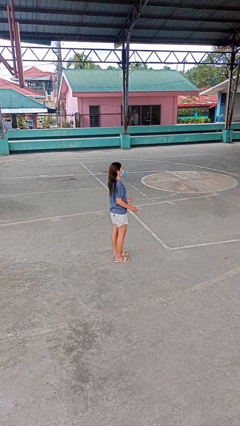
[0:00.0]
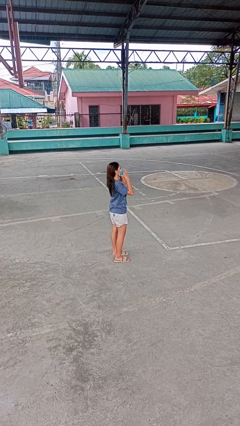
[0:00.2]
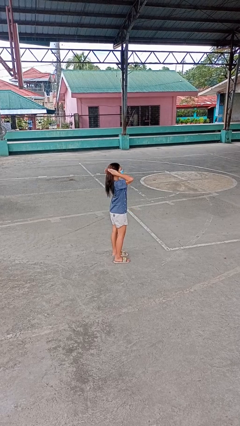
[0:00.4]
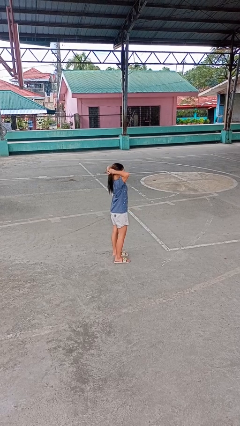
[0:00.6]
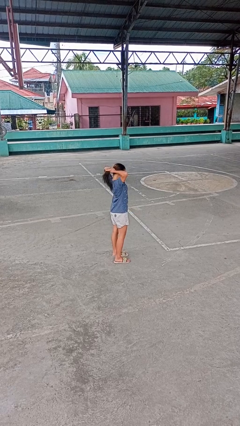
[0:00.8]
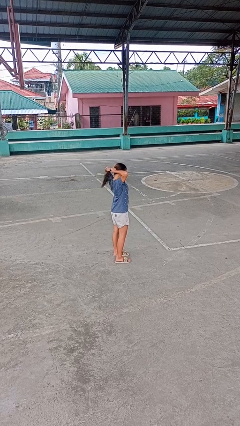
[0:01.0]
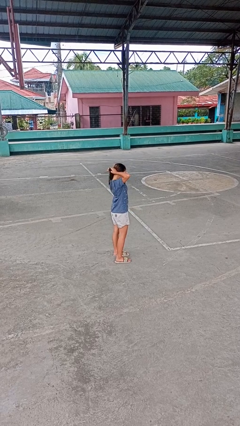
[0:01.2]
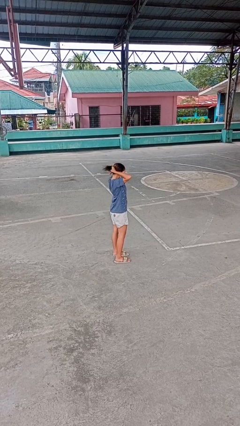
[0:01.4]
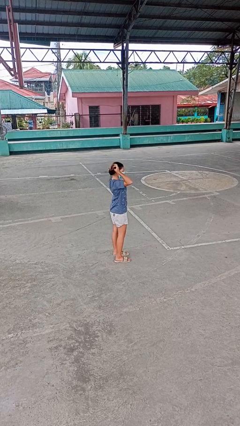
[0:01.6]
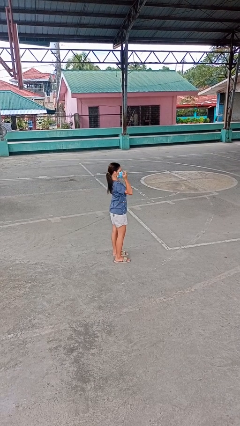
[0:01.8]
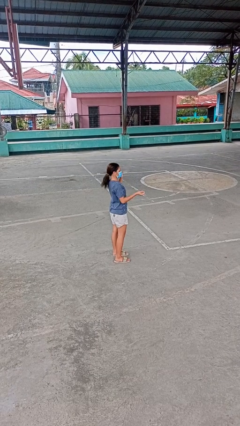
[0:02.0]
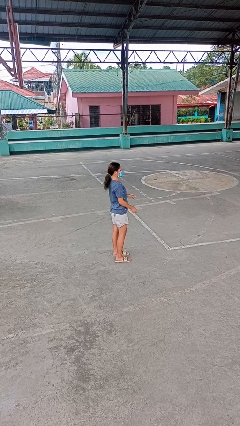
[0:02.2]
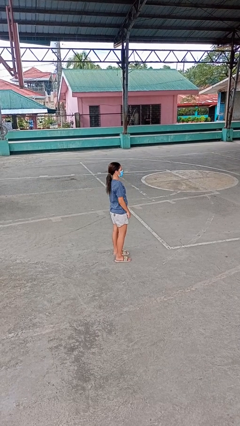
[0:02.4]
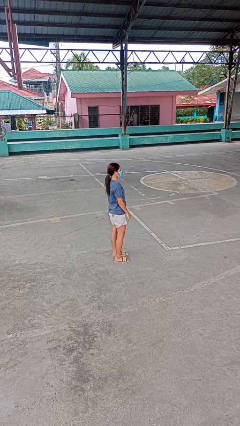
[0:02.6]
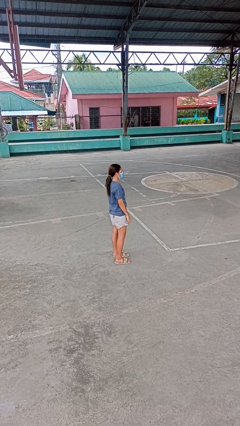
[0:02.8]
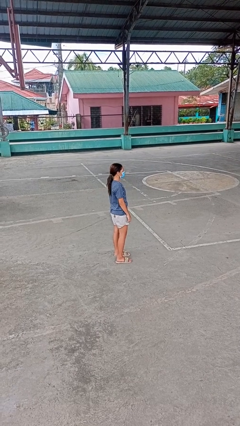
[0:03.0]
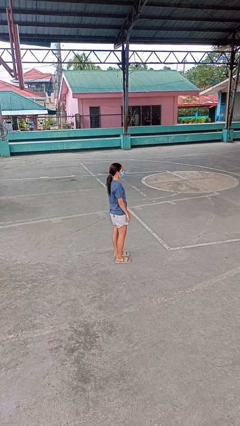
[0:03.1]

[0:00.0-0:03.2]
person puts hair in ponytail

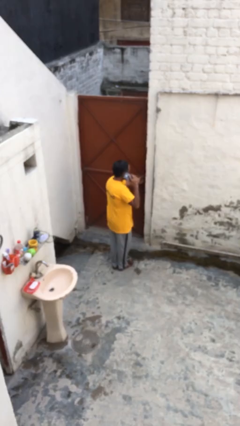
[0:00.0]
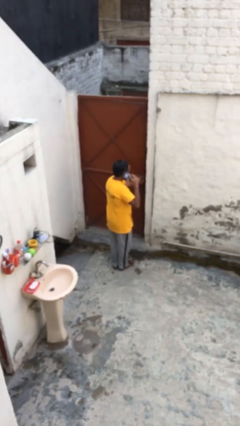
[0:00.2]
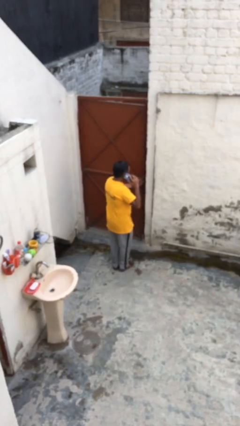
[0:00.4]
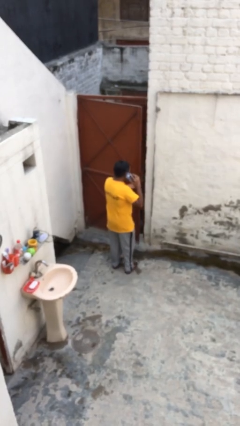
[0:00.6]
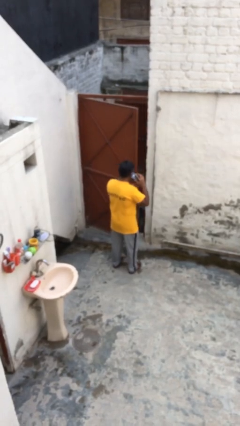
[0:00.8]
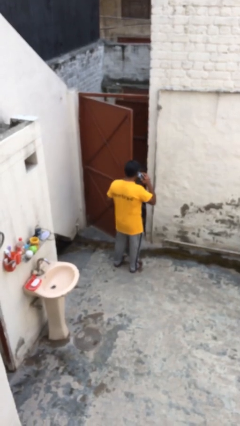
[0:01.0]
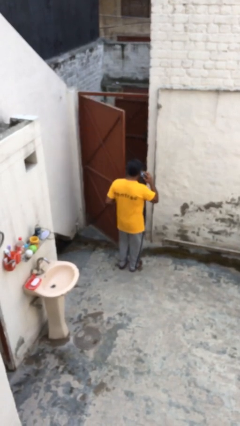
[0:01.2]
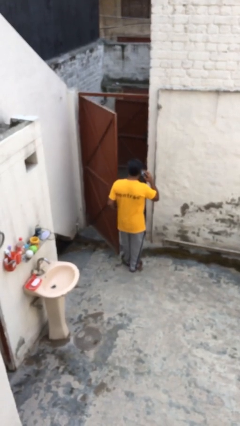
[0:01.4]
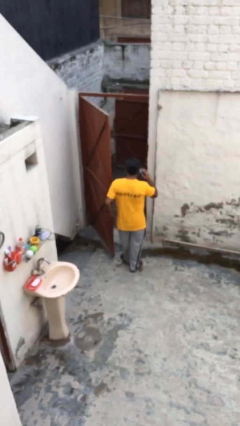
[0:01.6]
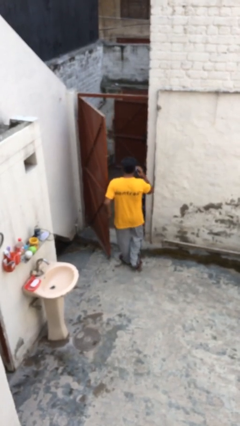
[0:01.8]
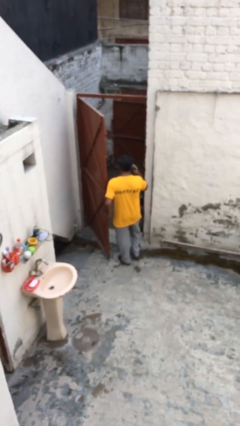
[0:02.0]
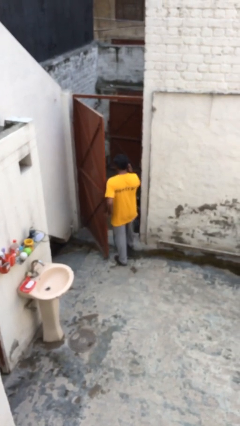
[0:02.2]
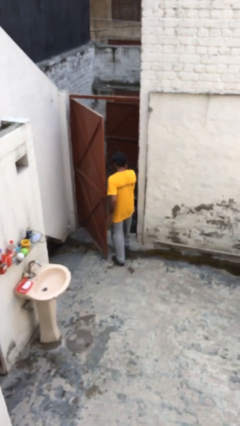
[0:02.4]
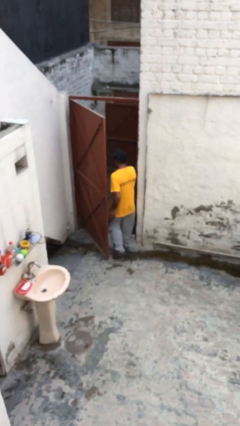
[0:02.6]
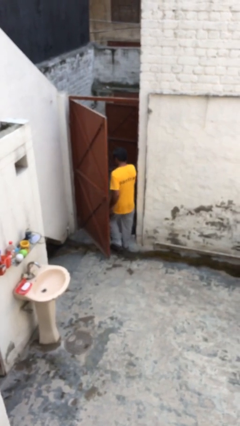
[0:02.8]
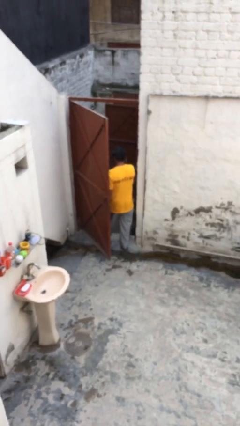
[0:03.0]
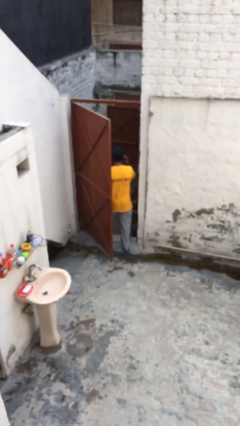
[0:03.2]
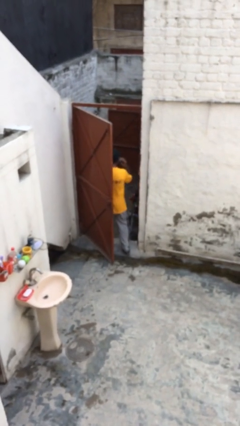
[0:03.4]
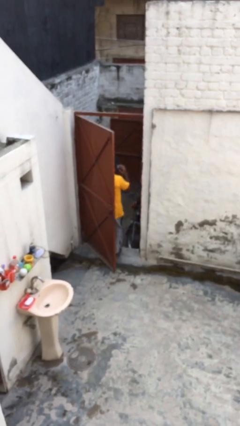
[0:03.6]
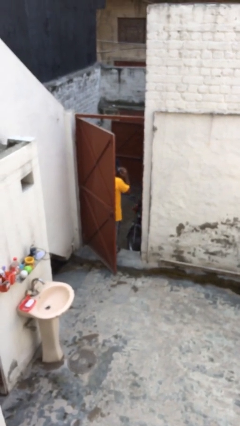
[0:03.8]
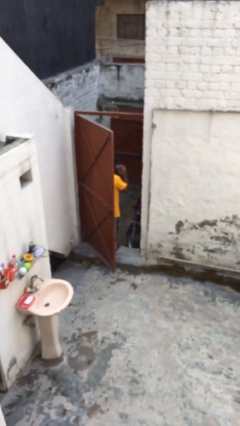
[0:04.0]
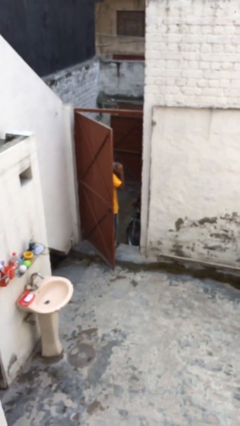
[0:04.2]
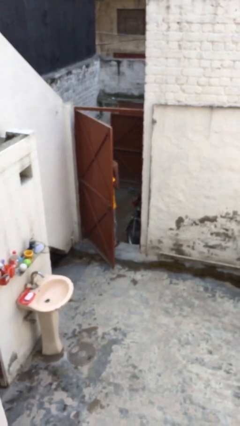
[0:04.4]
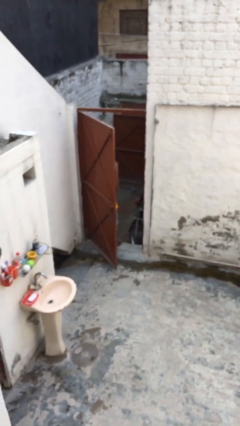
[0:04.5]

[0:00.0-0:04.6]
person exits scene through structure

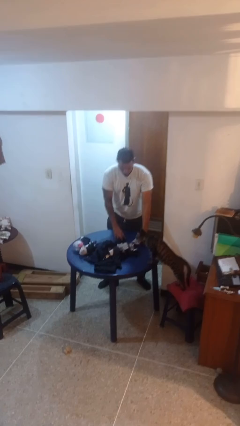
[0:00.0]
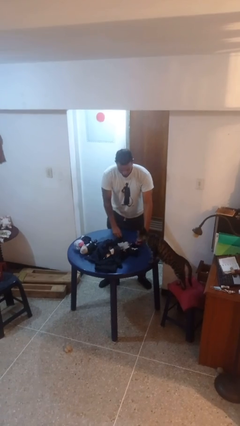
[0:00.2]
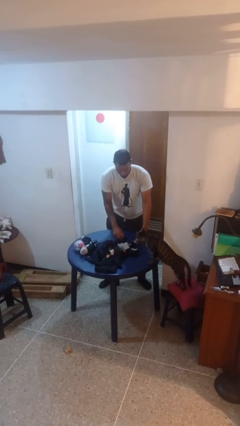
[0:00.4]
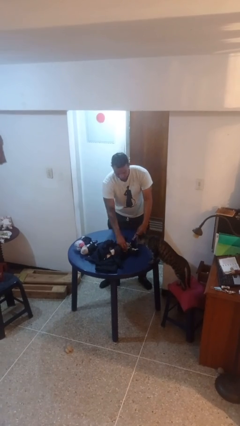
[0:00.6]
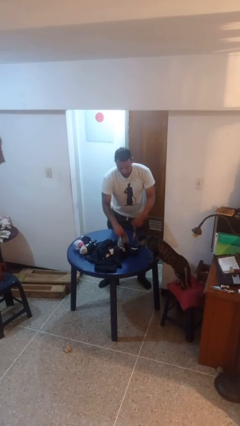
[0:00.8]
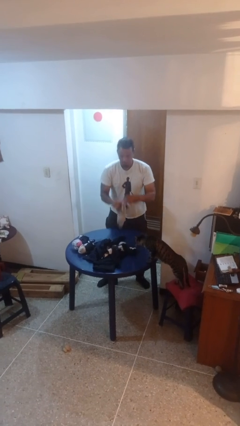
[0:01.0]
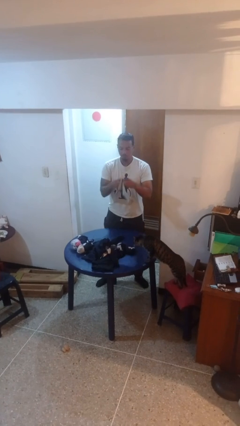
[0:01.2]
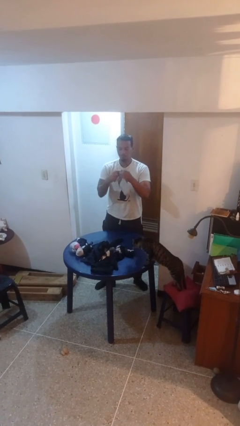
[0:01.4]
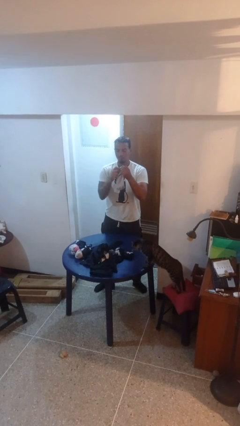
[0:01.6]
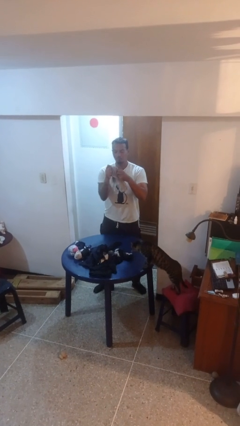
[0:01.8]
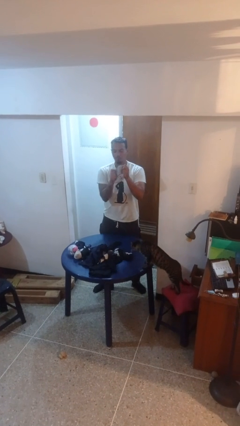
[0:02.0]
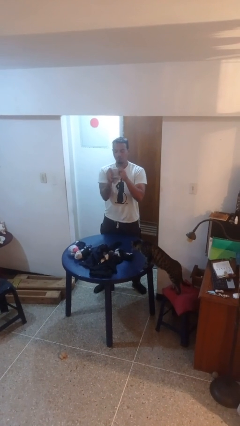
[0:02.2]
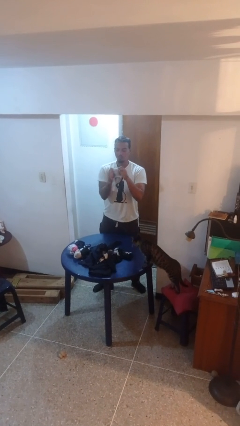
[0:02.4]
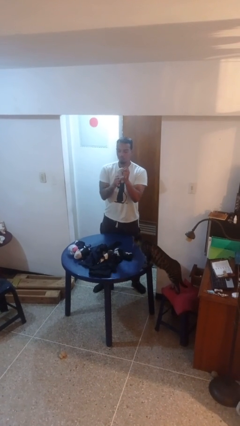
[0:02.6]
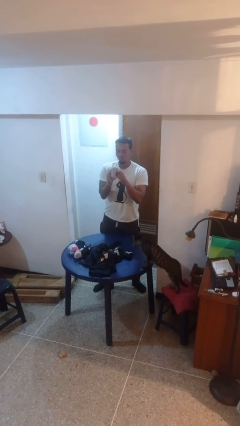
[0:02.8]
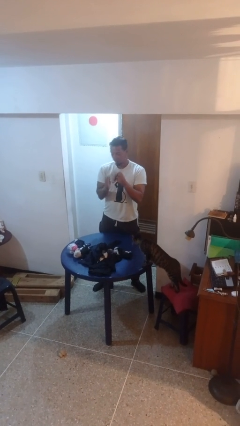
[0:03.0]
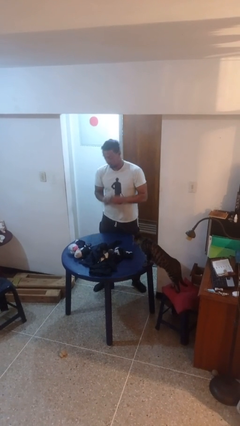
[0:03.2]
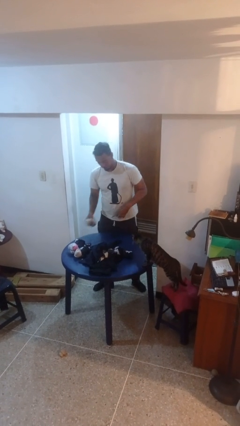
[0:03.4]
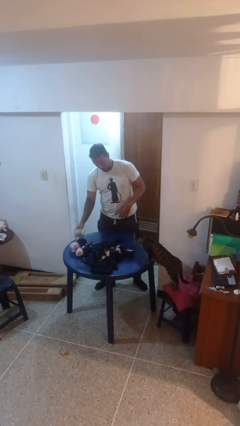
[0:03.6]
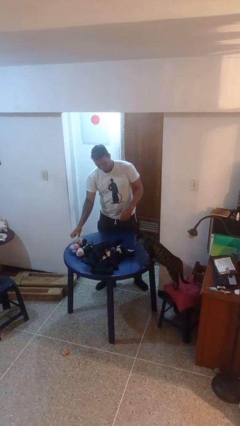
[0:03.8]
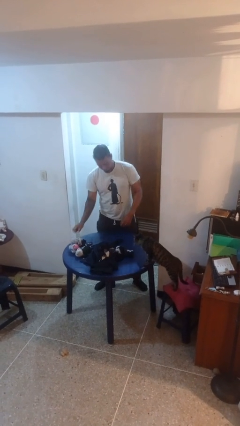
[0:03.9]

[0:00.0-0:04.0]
person folds socks

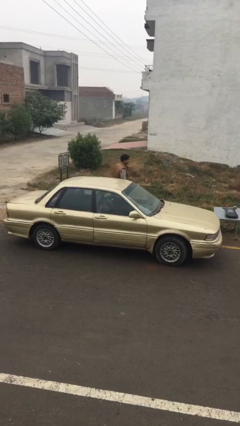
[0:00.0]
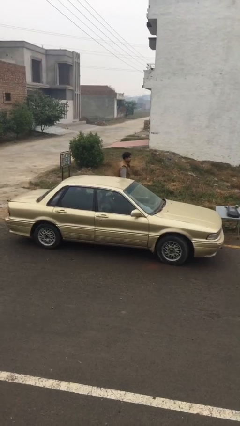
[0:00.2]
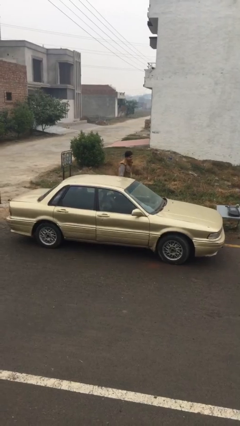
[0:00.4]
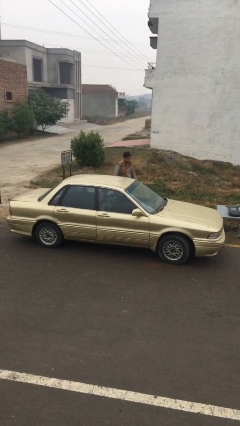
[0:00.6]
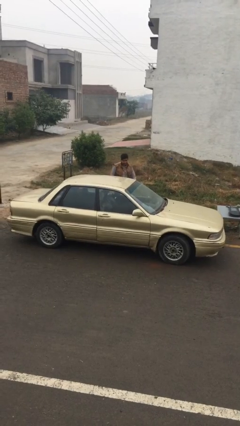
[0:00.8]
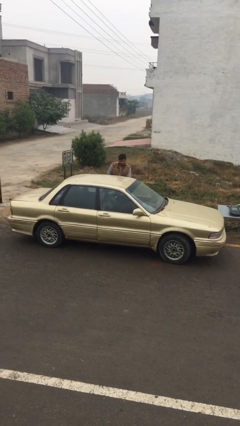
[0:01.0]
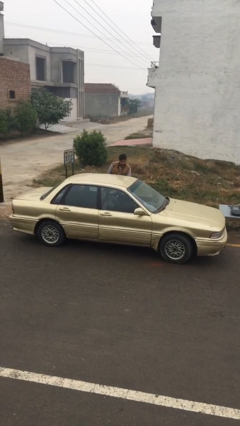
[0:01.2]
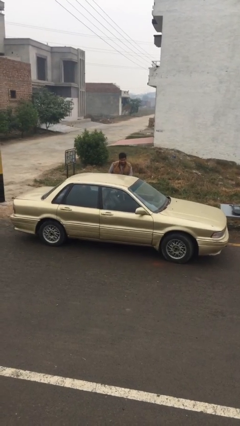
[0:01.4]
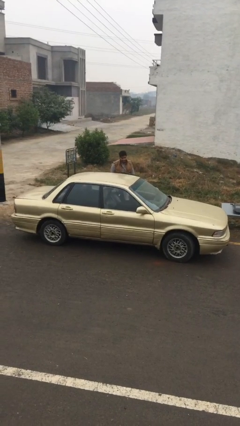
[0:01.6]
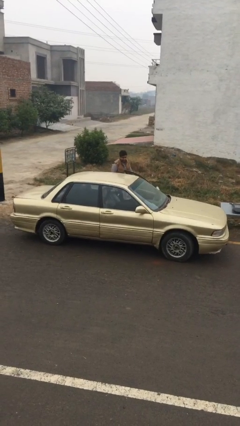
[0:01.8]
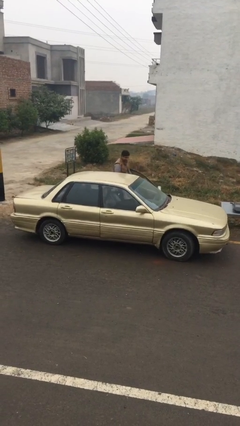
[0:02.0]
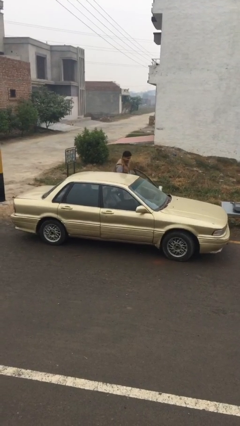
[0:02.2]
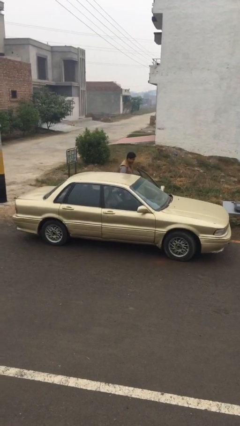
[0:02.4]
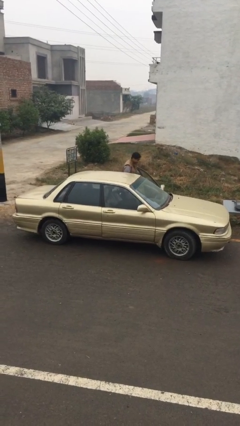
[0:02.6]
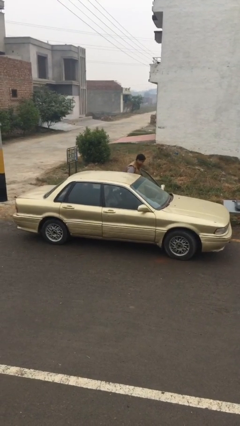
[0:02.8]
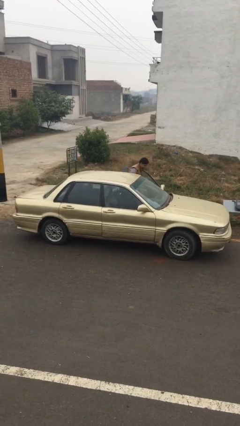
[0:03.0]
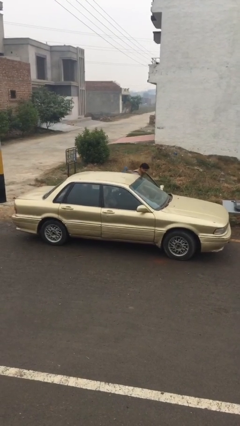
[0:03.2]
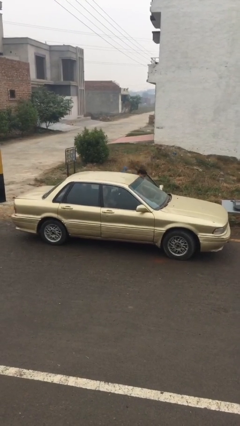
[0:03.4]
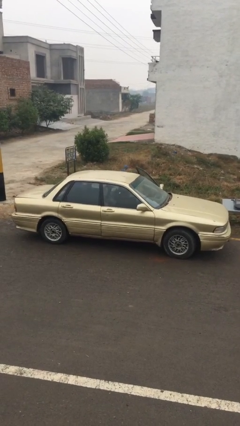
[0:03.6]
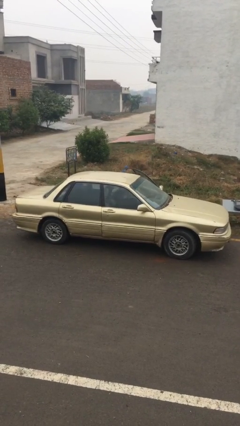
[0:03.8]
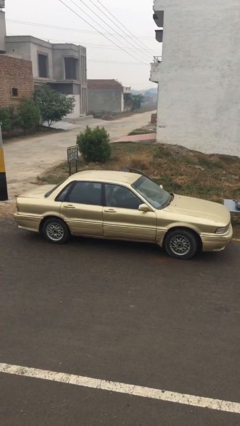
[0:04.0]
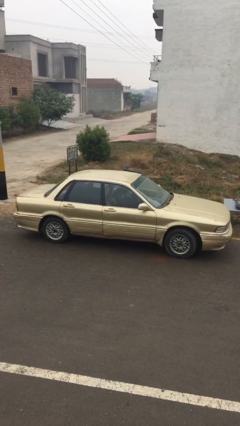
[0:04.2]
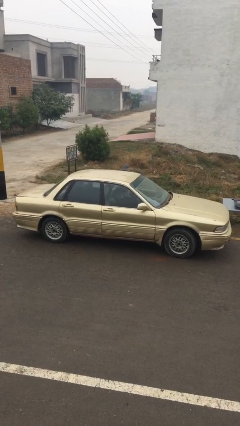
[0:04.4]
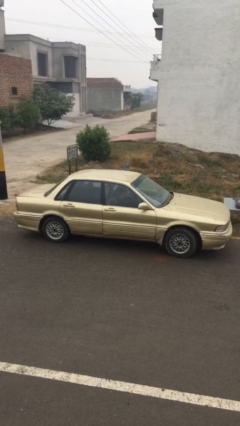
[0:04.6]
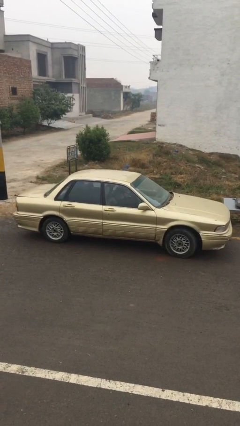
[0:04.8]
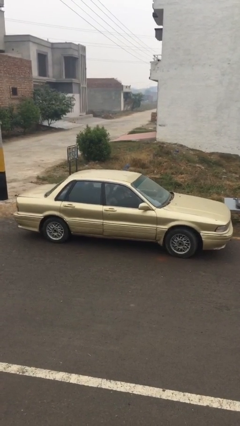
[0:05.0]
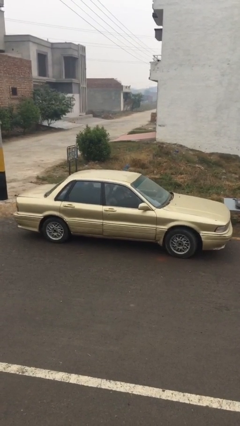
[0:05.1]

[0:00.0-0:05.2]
car picks up person

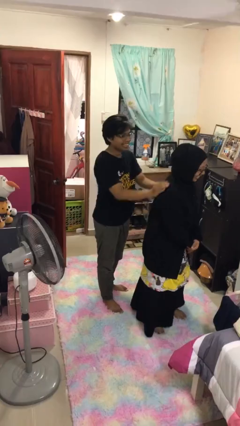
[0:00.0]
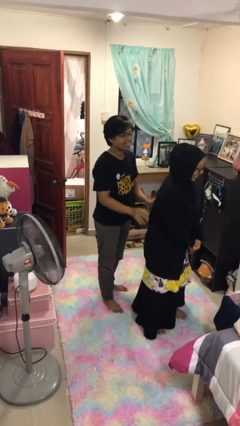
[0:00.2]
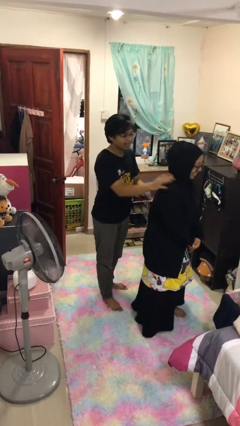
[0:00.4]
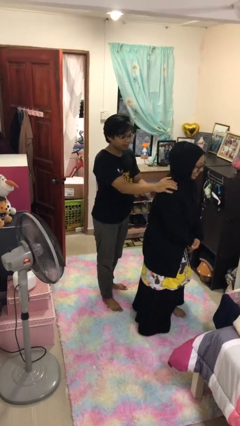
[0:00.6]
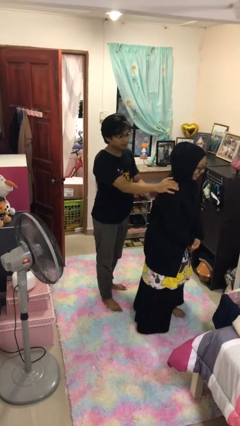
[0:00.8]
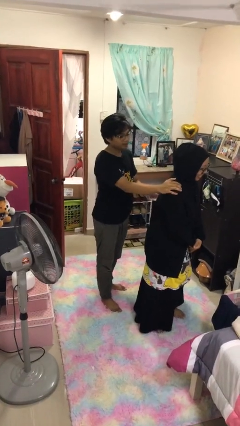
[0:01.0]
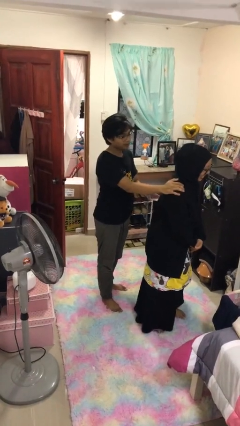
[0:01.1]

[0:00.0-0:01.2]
person grabs person by shoulder
